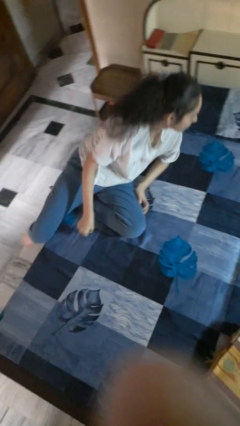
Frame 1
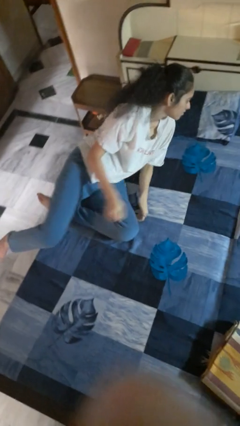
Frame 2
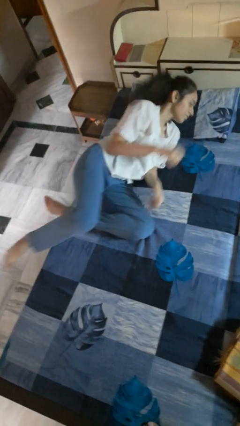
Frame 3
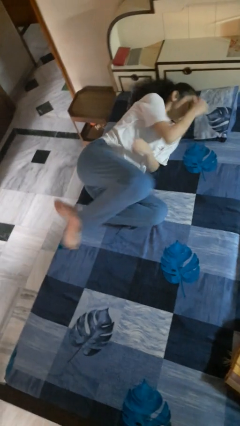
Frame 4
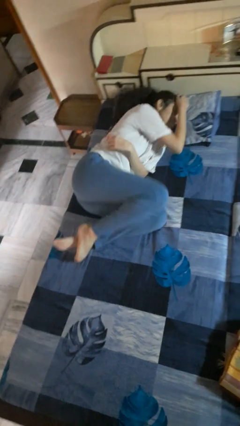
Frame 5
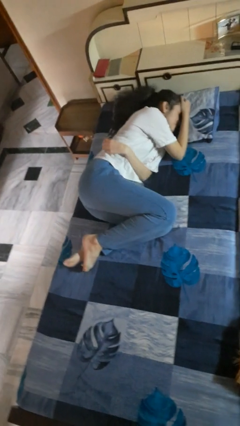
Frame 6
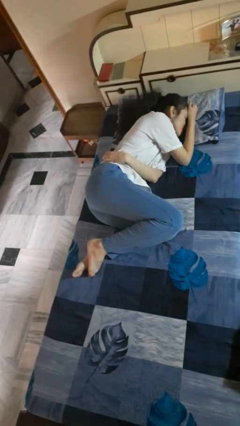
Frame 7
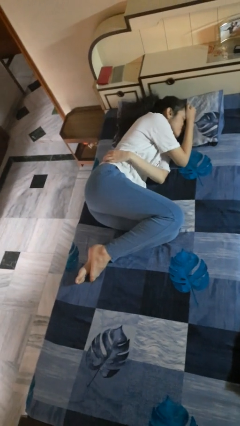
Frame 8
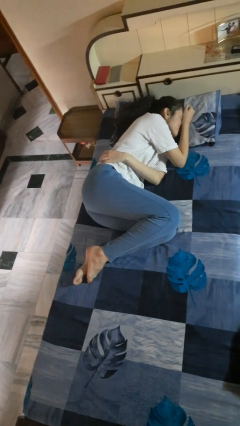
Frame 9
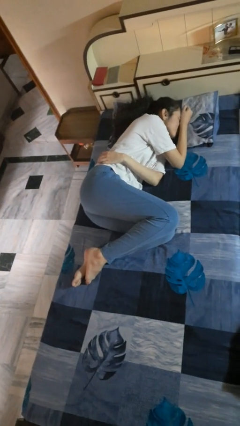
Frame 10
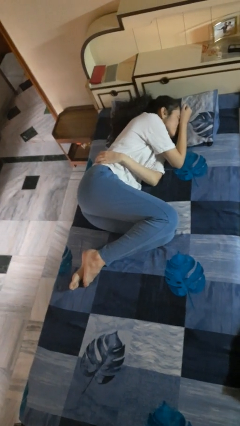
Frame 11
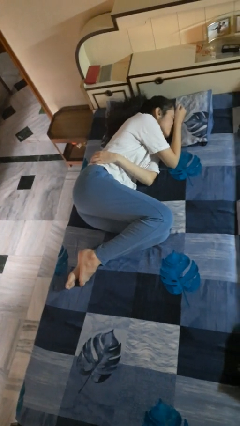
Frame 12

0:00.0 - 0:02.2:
person lies down on bed

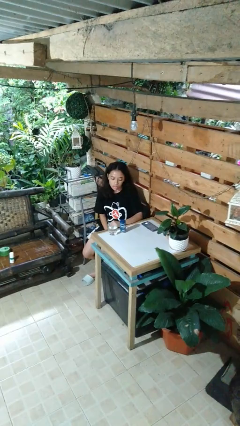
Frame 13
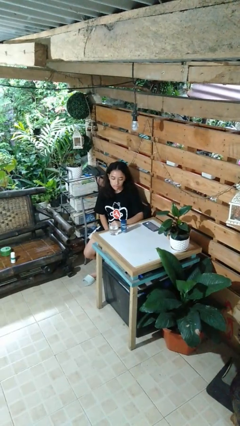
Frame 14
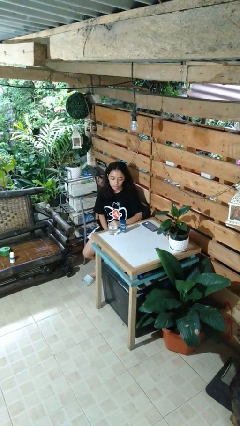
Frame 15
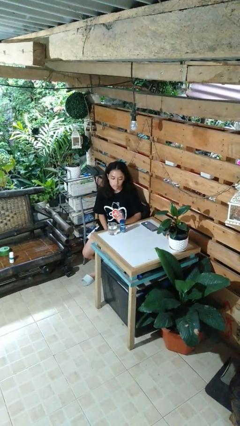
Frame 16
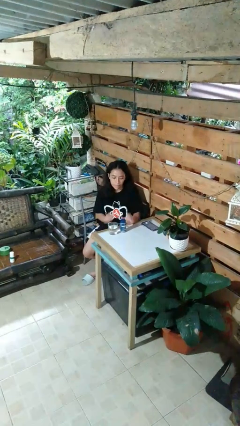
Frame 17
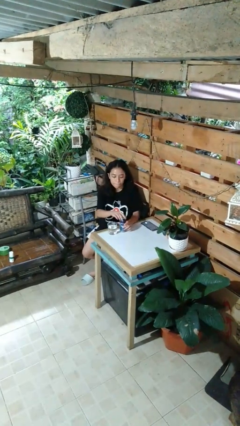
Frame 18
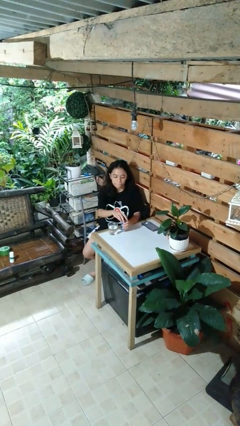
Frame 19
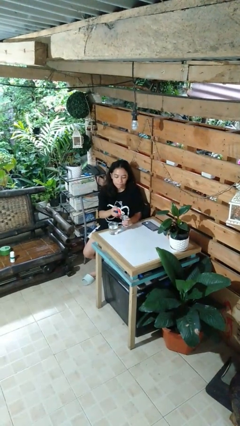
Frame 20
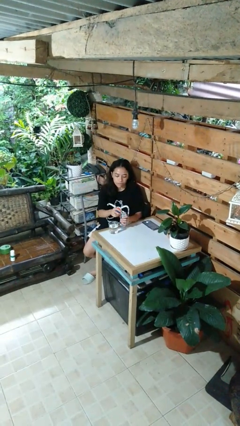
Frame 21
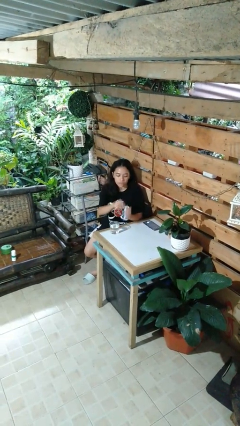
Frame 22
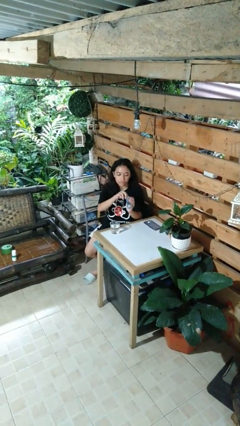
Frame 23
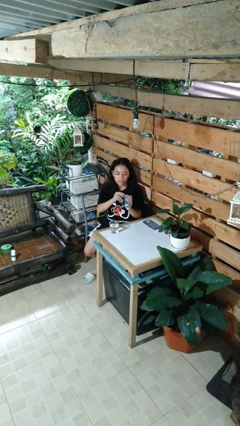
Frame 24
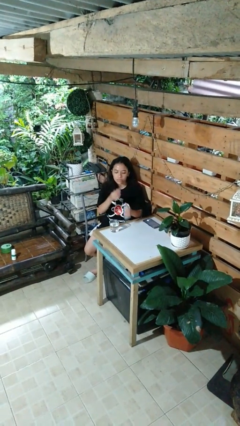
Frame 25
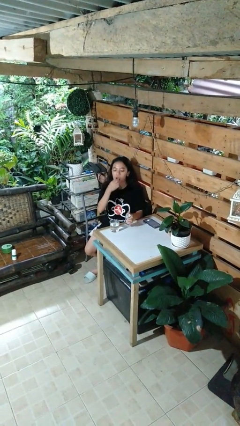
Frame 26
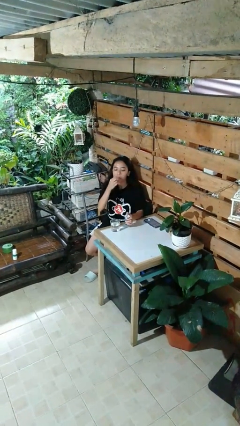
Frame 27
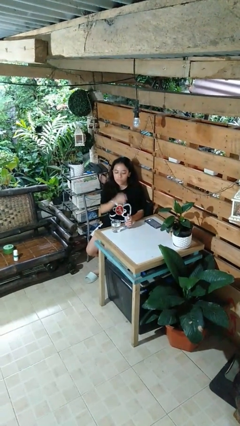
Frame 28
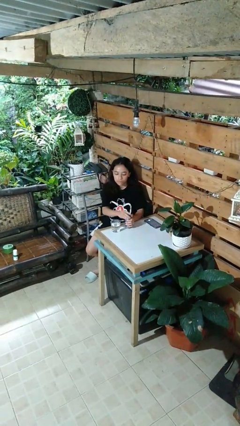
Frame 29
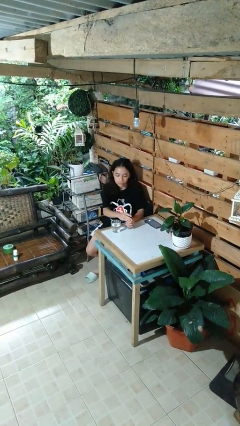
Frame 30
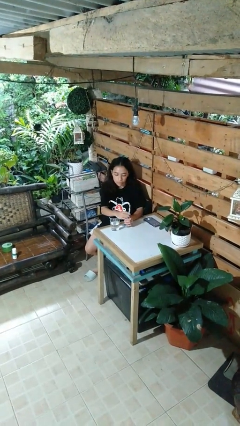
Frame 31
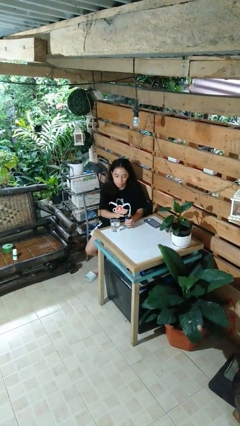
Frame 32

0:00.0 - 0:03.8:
person takes medicine pills

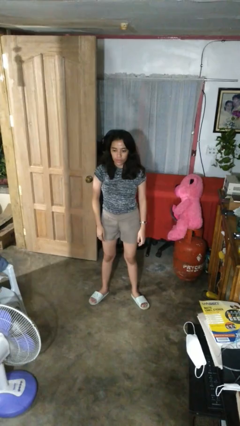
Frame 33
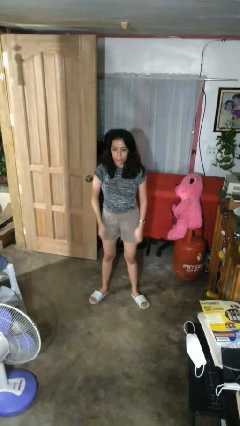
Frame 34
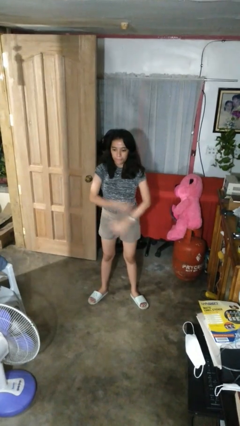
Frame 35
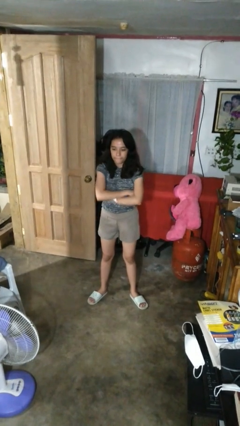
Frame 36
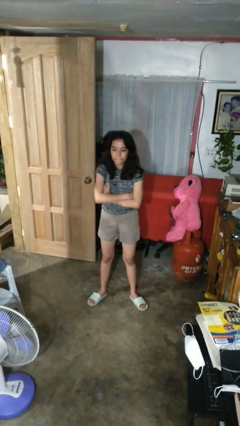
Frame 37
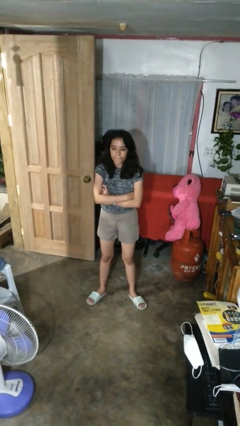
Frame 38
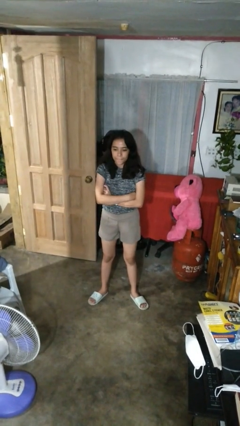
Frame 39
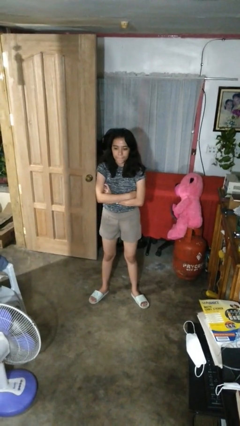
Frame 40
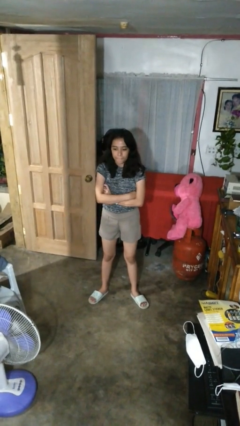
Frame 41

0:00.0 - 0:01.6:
person crosses arms

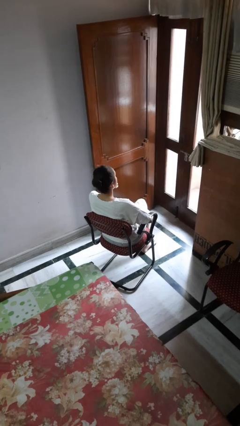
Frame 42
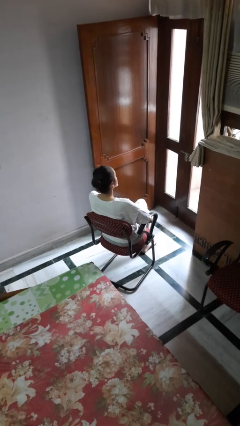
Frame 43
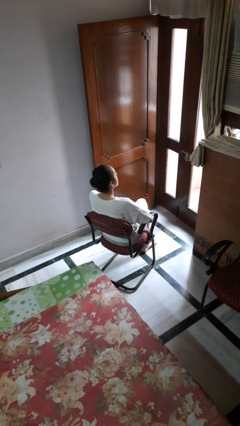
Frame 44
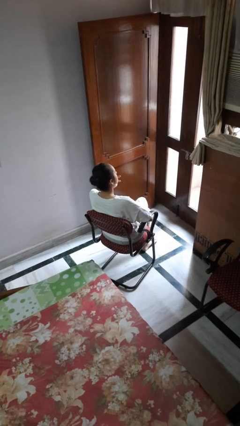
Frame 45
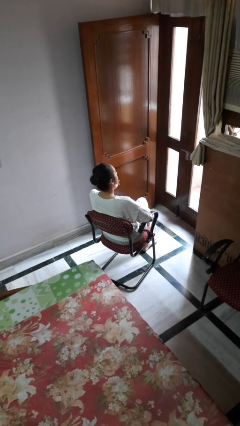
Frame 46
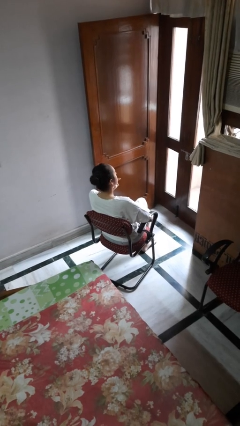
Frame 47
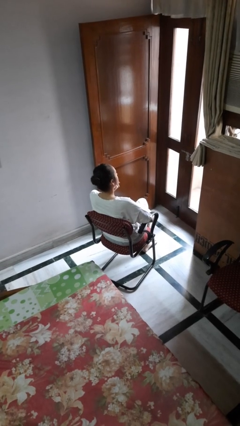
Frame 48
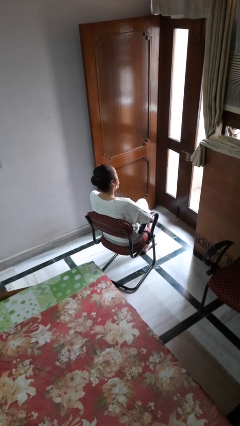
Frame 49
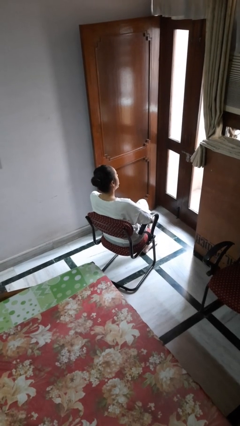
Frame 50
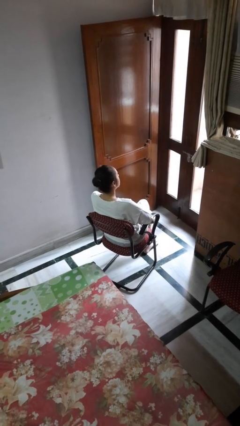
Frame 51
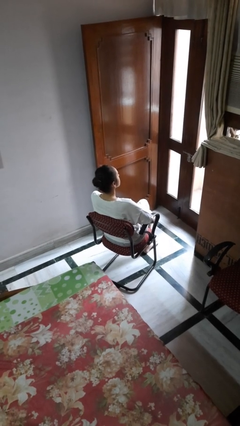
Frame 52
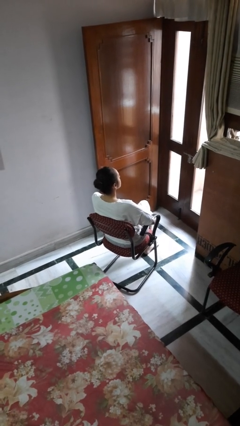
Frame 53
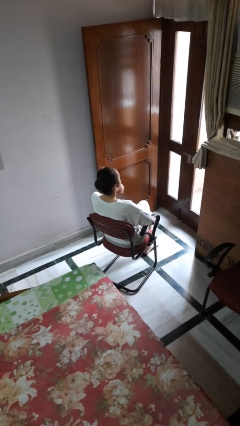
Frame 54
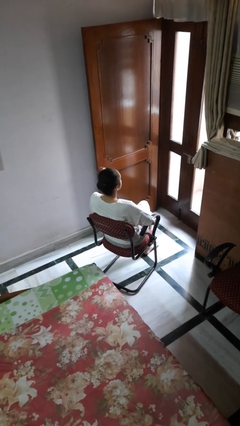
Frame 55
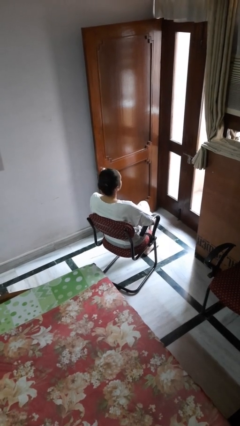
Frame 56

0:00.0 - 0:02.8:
person strokes chin

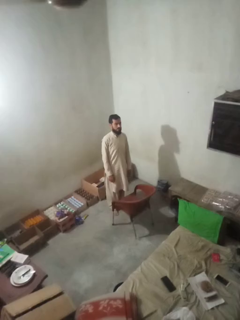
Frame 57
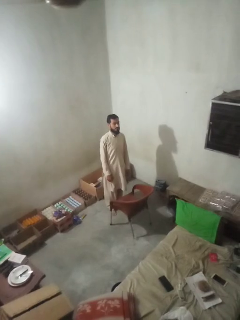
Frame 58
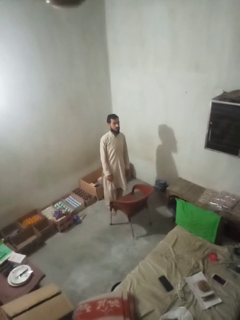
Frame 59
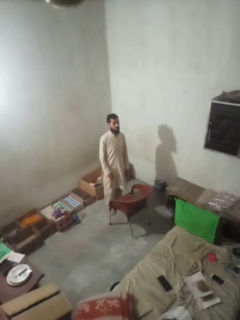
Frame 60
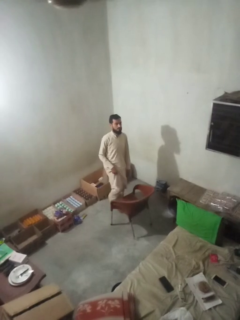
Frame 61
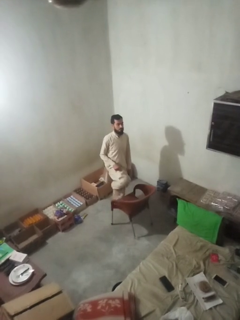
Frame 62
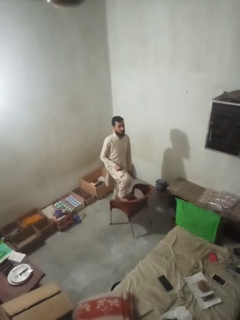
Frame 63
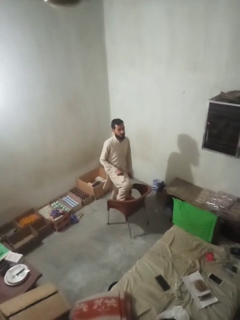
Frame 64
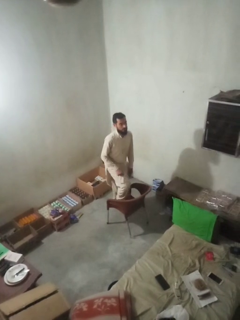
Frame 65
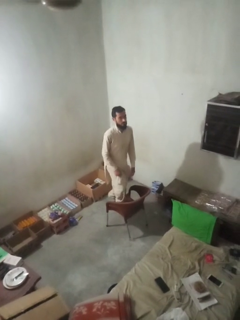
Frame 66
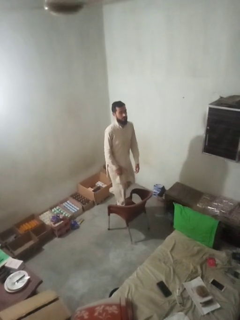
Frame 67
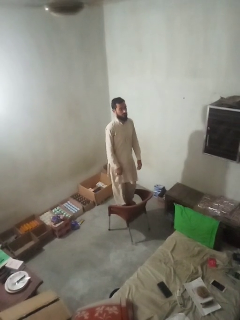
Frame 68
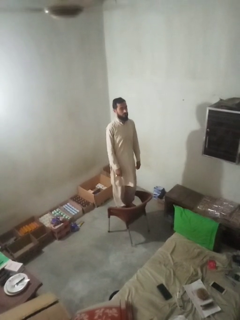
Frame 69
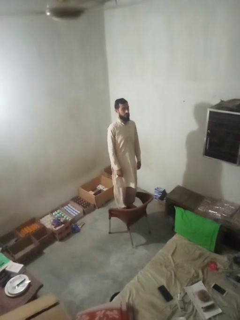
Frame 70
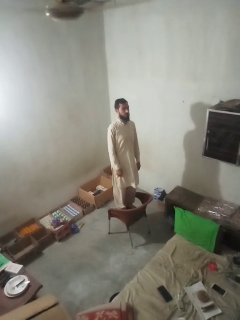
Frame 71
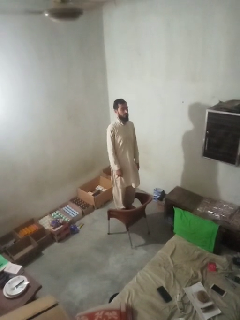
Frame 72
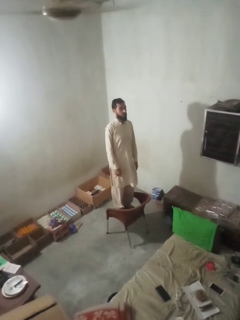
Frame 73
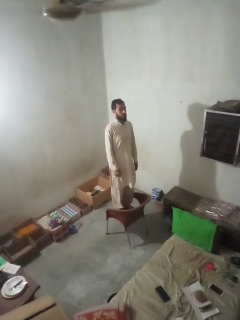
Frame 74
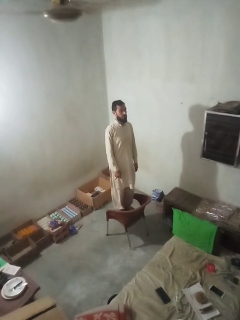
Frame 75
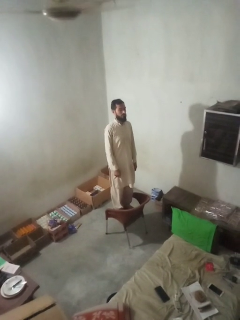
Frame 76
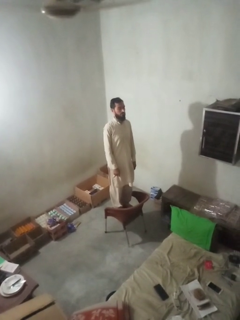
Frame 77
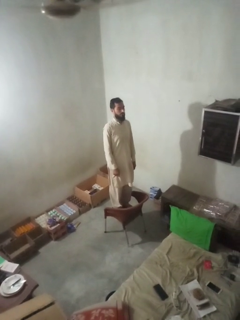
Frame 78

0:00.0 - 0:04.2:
person climbs on chair

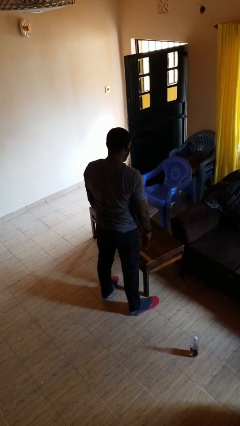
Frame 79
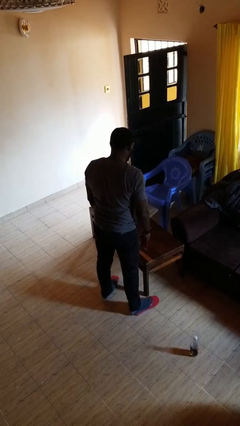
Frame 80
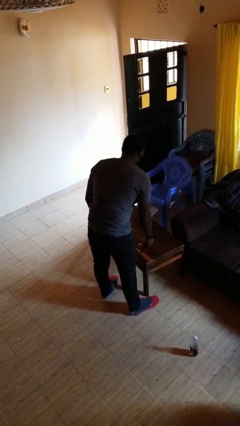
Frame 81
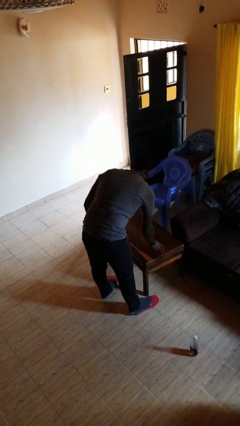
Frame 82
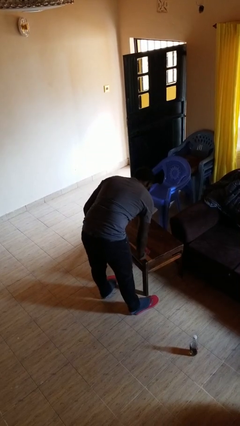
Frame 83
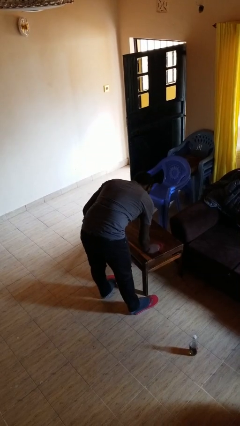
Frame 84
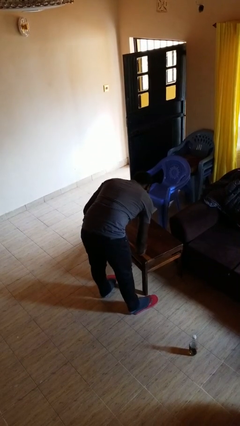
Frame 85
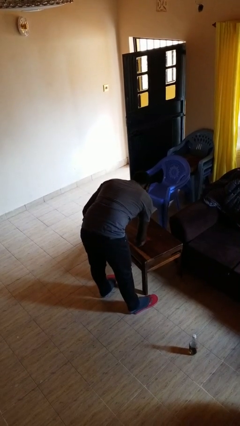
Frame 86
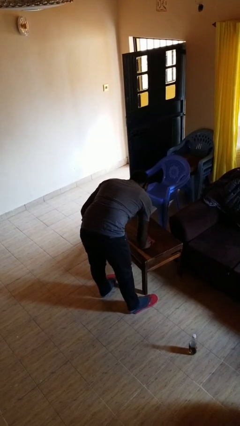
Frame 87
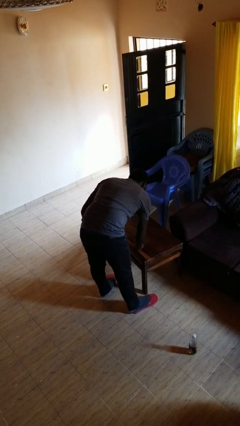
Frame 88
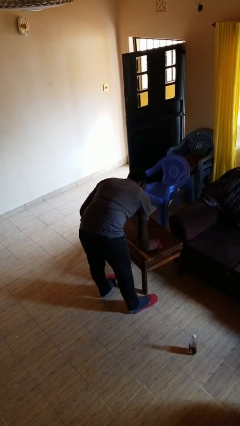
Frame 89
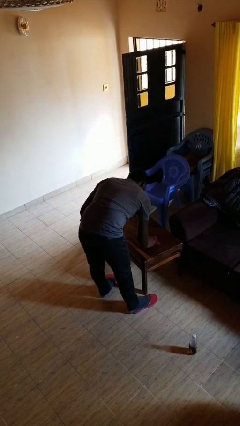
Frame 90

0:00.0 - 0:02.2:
person cleans table with rag

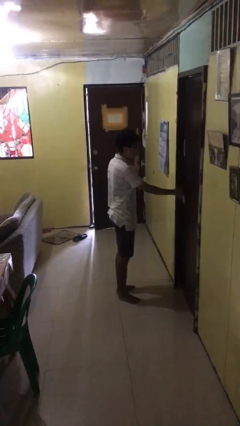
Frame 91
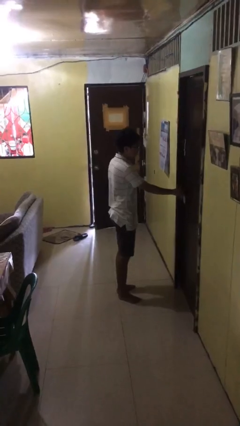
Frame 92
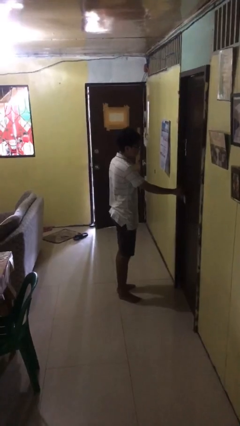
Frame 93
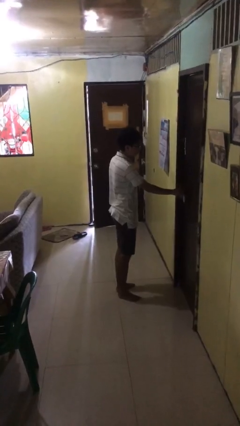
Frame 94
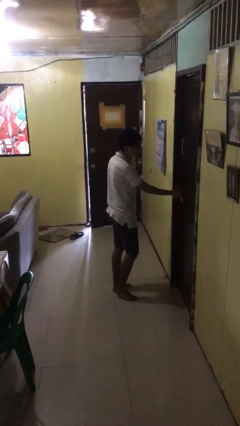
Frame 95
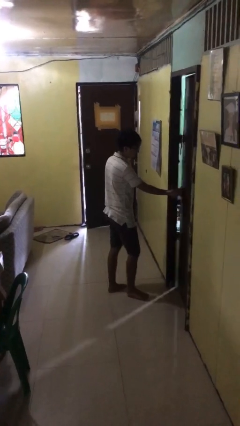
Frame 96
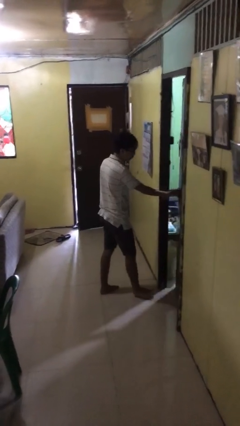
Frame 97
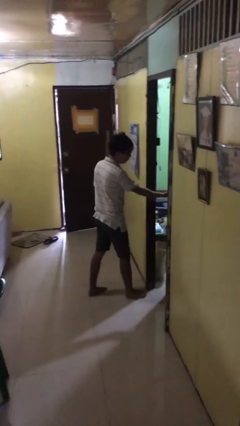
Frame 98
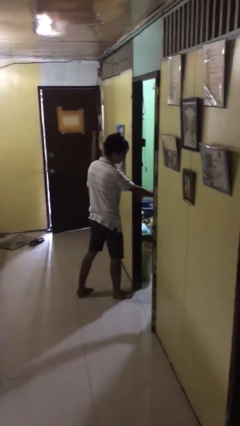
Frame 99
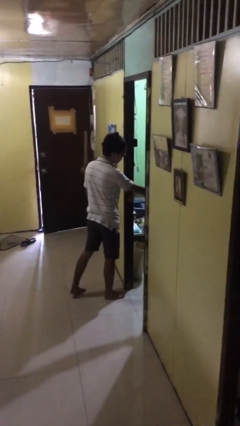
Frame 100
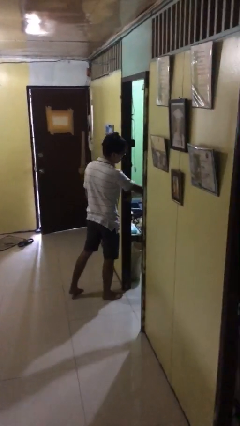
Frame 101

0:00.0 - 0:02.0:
person opens facility door
